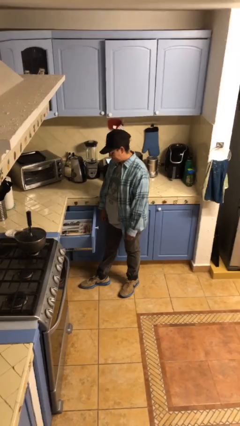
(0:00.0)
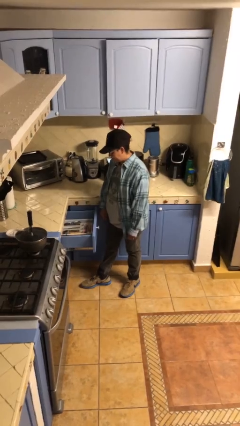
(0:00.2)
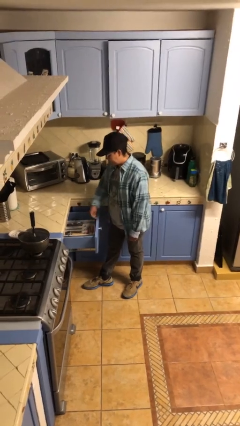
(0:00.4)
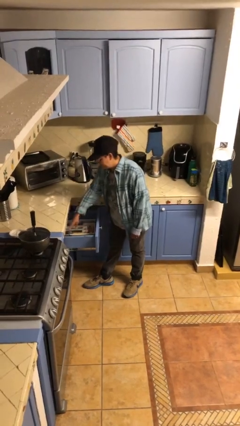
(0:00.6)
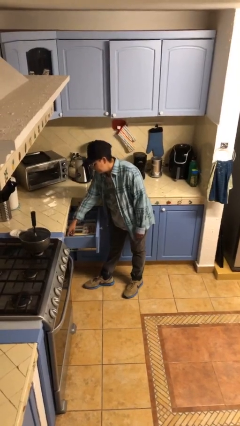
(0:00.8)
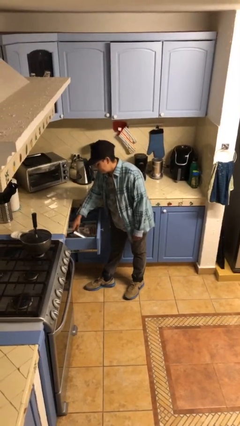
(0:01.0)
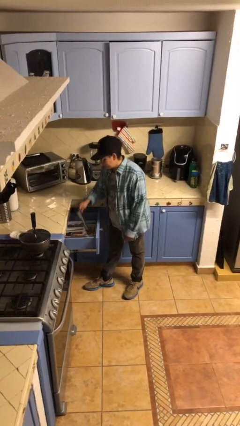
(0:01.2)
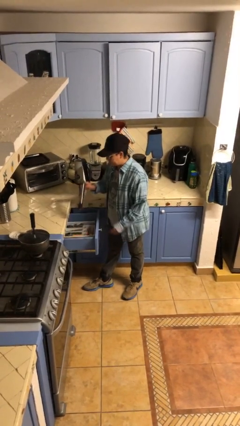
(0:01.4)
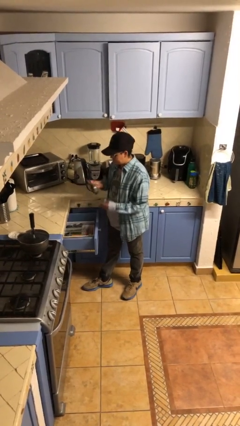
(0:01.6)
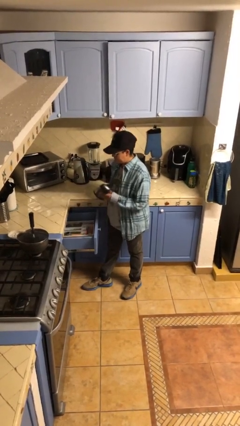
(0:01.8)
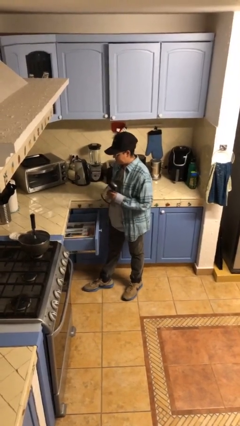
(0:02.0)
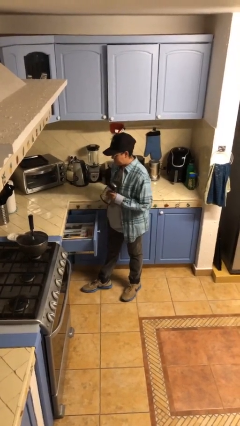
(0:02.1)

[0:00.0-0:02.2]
person takes object from kitchen drawer

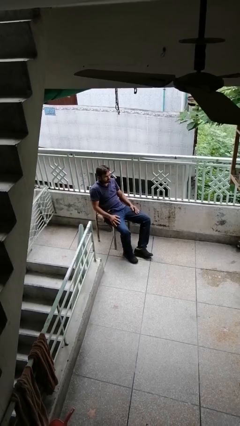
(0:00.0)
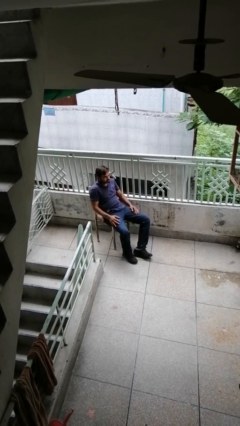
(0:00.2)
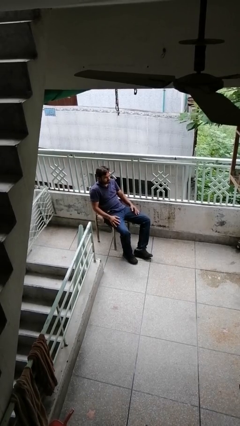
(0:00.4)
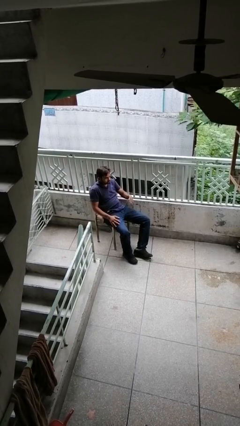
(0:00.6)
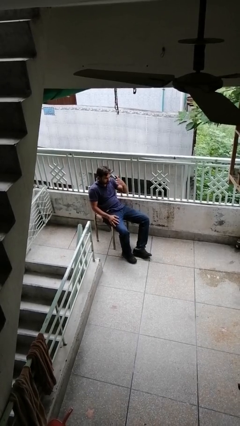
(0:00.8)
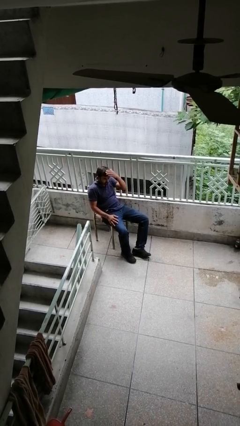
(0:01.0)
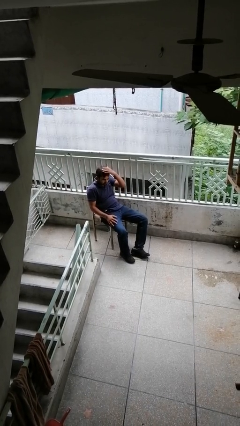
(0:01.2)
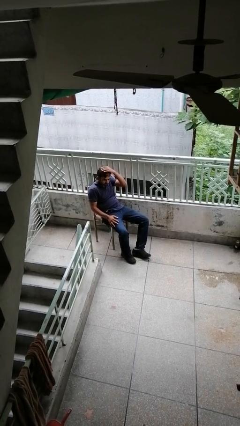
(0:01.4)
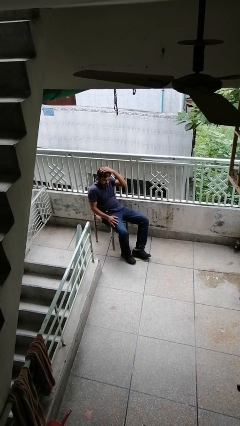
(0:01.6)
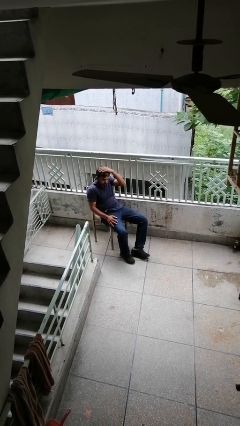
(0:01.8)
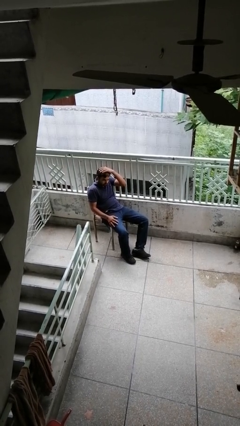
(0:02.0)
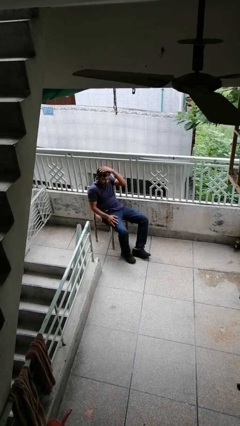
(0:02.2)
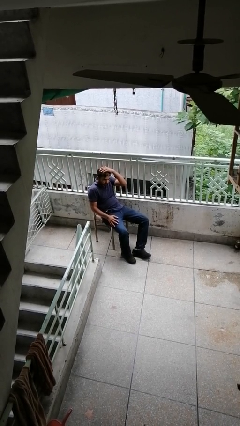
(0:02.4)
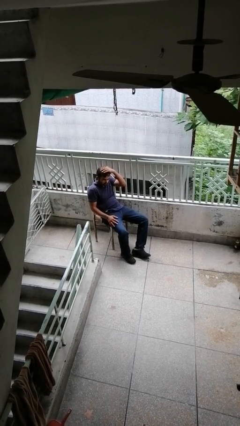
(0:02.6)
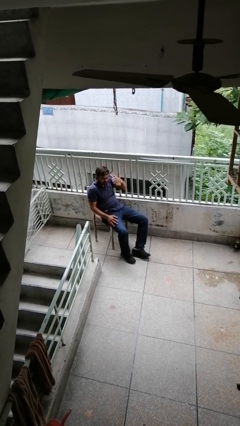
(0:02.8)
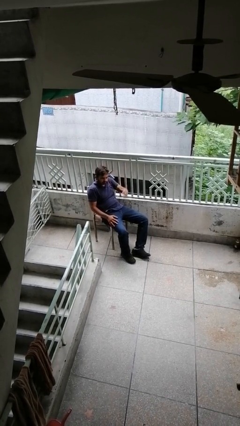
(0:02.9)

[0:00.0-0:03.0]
person pats head

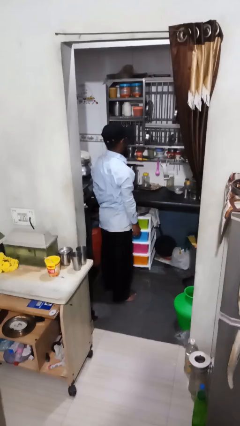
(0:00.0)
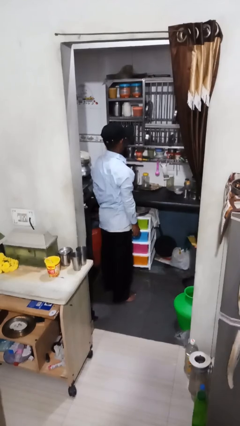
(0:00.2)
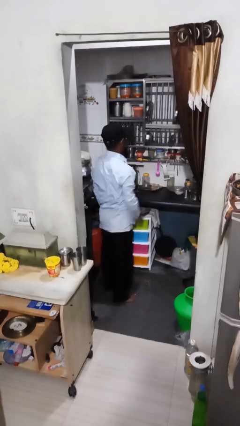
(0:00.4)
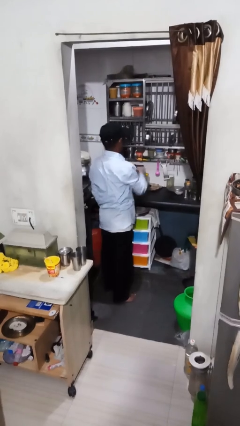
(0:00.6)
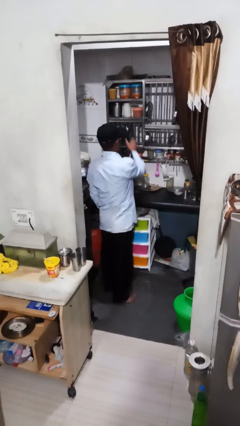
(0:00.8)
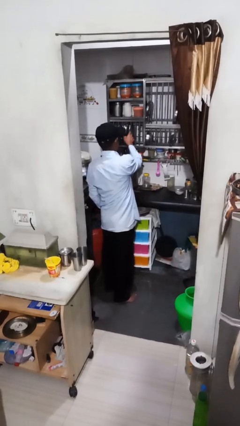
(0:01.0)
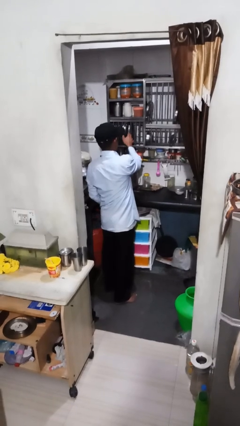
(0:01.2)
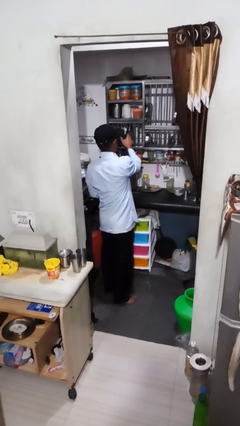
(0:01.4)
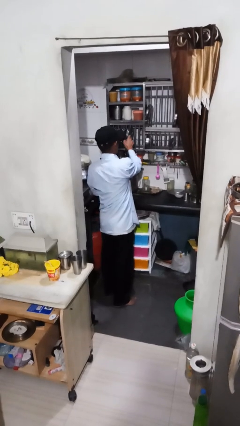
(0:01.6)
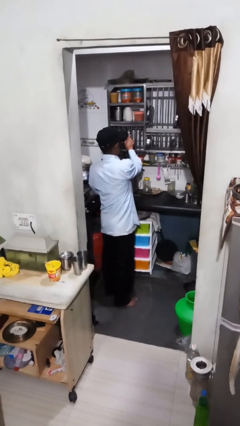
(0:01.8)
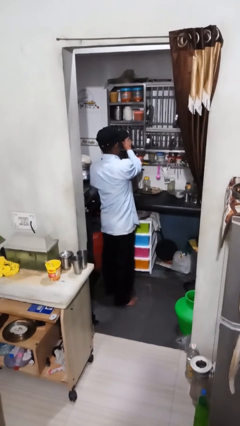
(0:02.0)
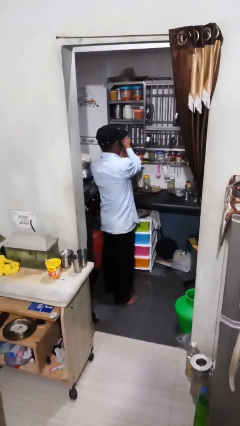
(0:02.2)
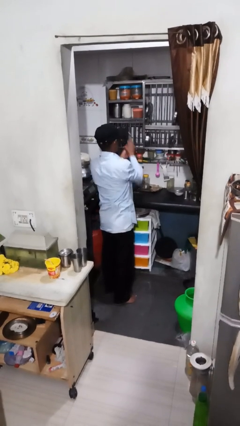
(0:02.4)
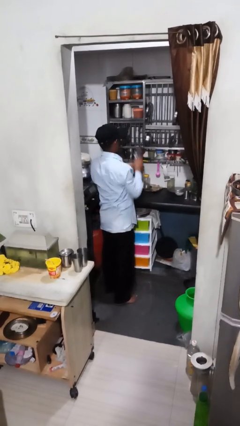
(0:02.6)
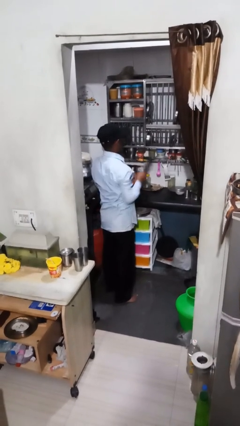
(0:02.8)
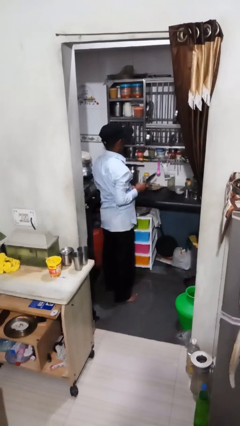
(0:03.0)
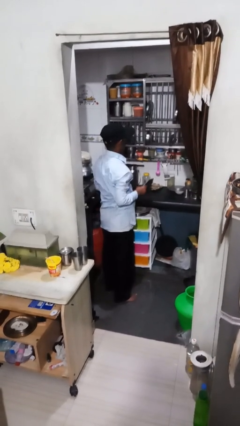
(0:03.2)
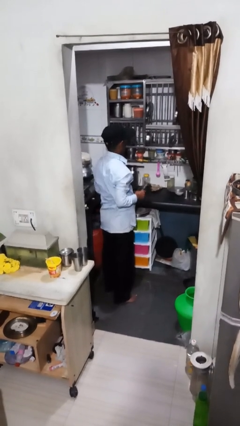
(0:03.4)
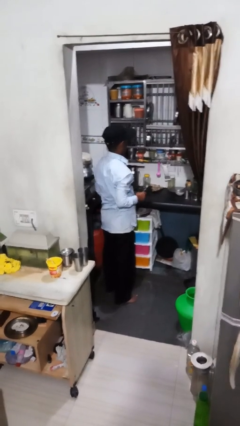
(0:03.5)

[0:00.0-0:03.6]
person takes object from cabinet

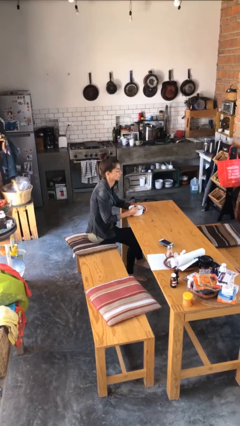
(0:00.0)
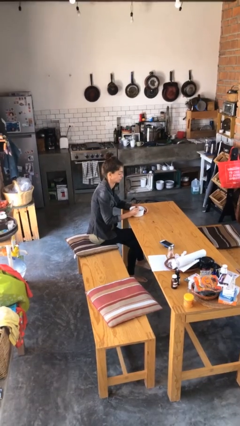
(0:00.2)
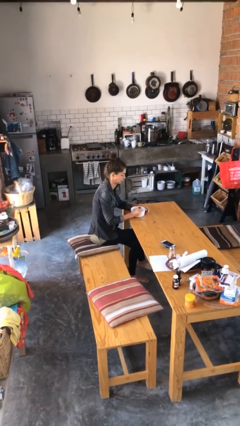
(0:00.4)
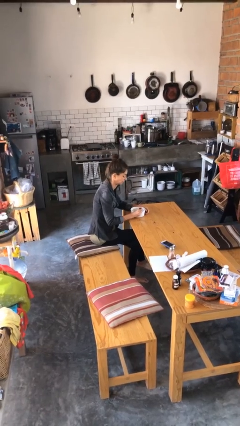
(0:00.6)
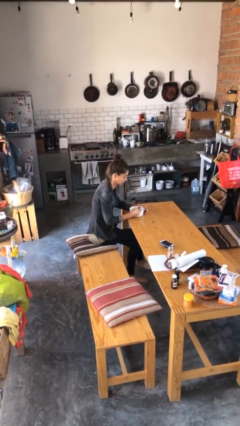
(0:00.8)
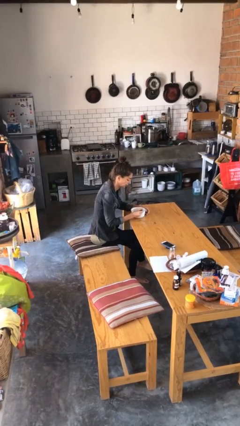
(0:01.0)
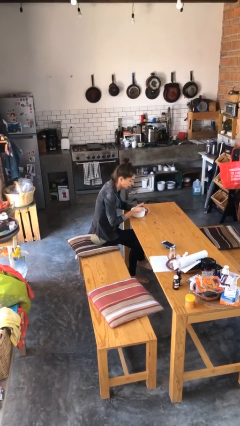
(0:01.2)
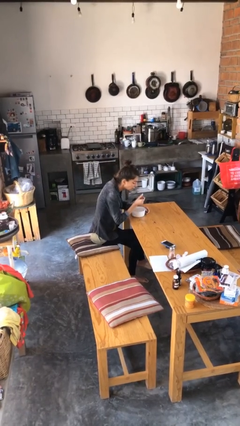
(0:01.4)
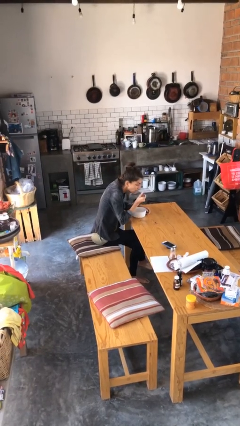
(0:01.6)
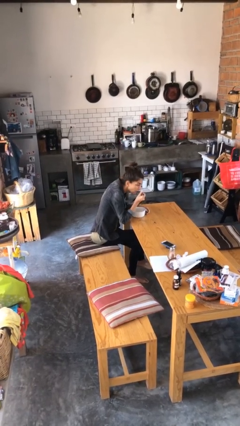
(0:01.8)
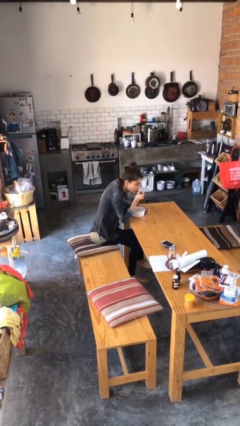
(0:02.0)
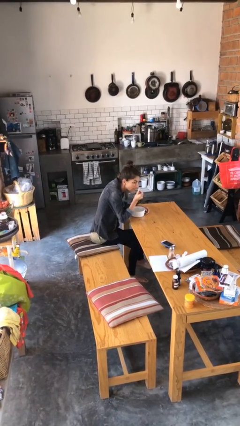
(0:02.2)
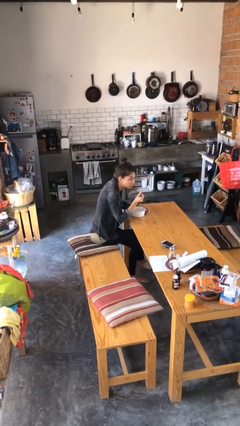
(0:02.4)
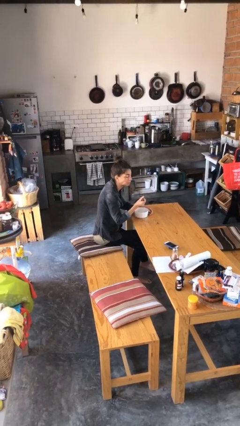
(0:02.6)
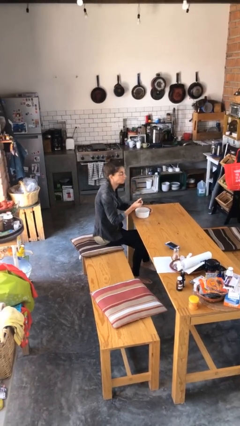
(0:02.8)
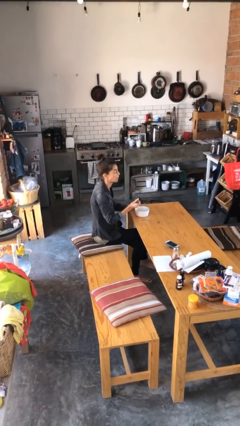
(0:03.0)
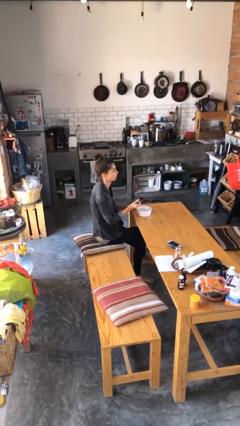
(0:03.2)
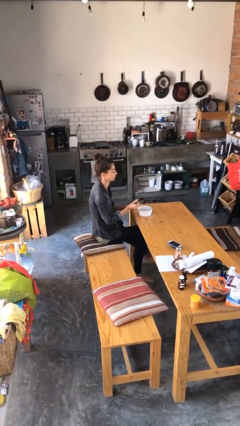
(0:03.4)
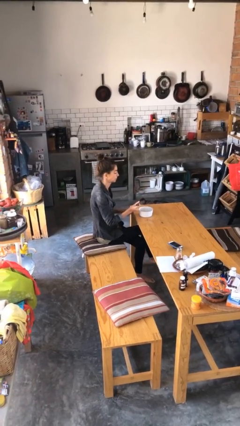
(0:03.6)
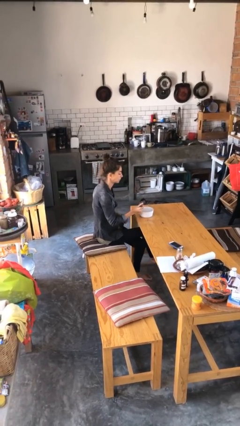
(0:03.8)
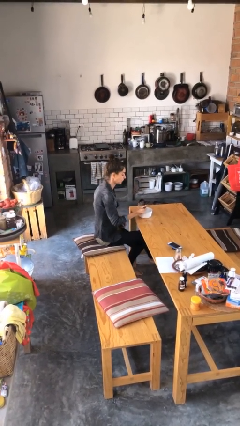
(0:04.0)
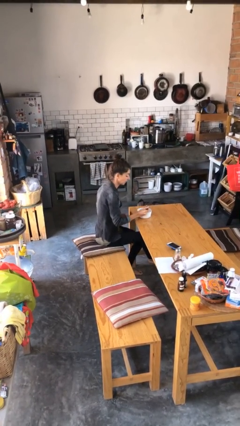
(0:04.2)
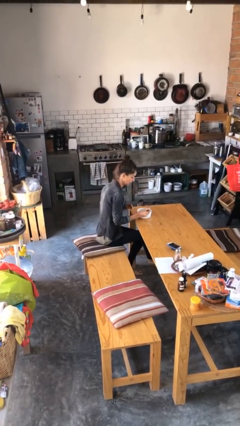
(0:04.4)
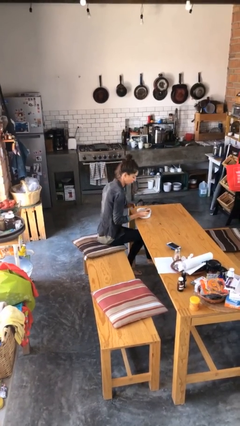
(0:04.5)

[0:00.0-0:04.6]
person eats with utensil

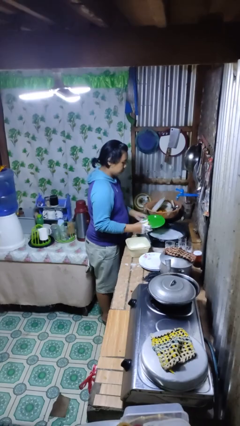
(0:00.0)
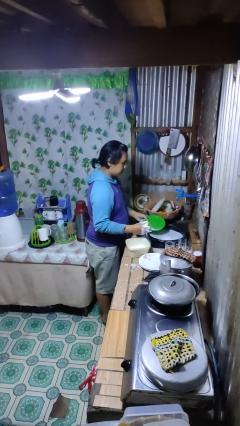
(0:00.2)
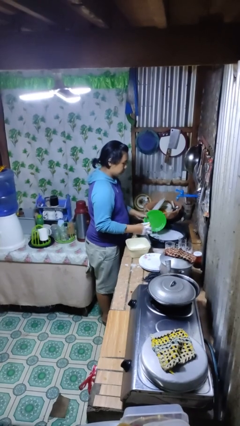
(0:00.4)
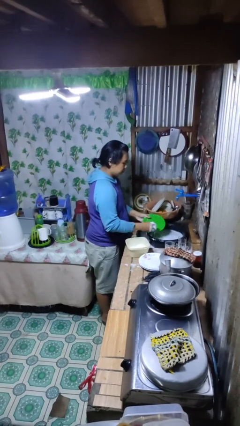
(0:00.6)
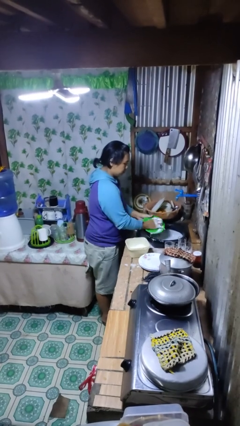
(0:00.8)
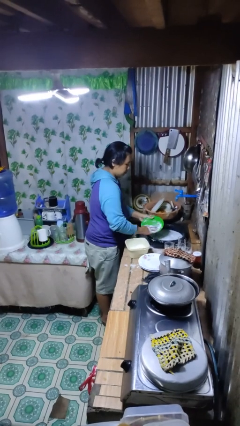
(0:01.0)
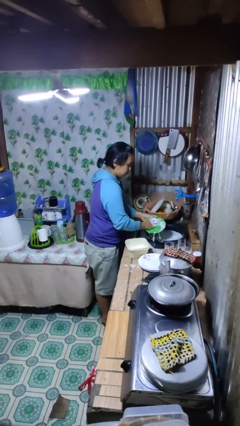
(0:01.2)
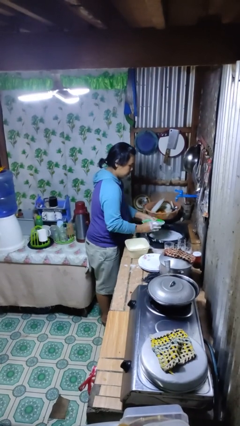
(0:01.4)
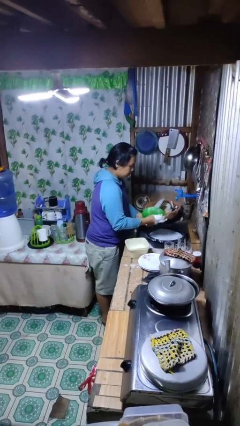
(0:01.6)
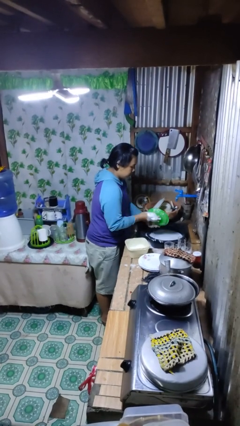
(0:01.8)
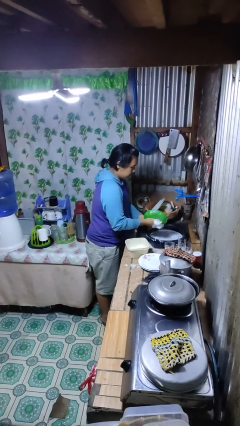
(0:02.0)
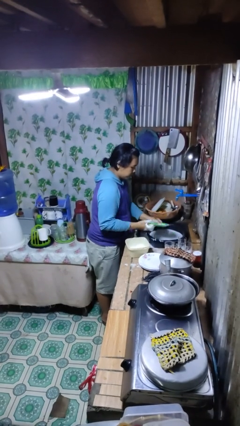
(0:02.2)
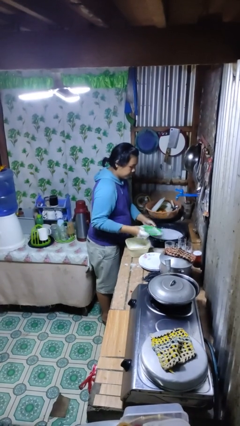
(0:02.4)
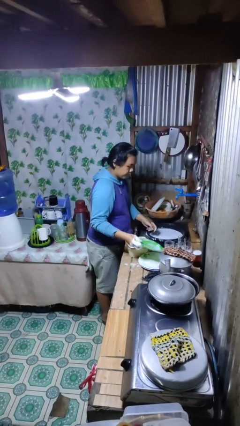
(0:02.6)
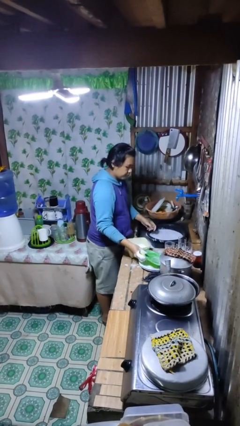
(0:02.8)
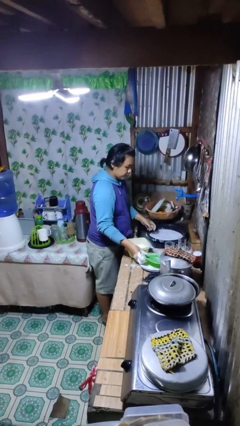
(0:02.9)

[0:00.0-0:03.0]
person washes dish

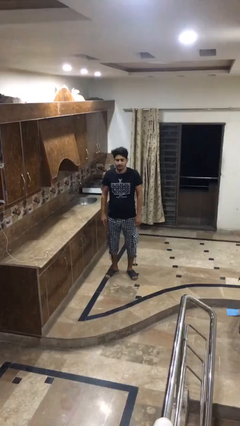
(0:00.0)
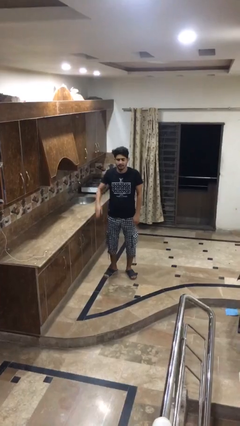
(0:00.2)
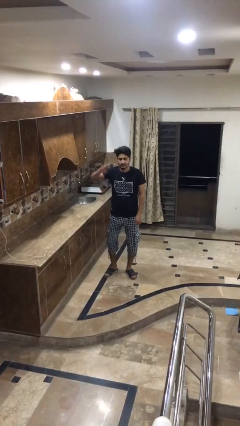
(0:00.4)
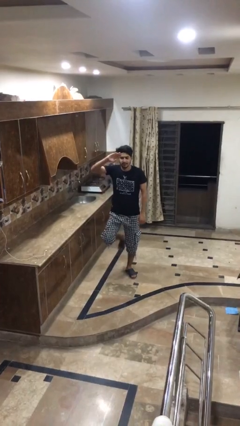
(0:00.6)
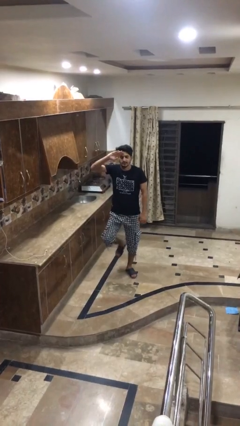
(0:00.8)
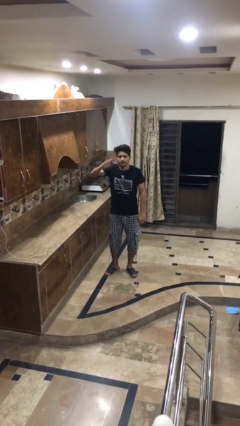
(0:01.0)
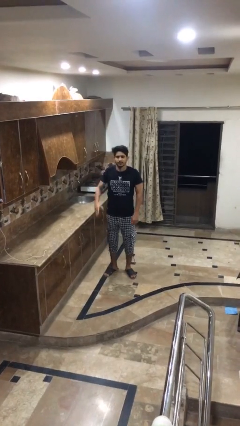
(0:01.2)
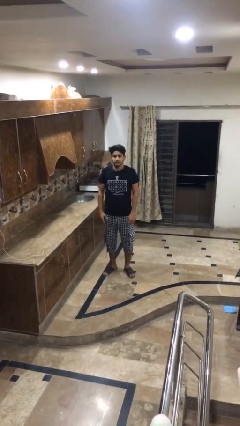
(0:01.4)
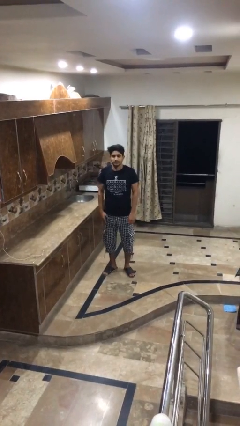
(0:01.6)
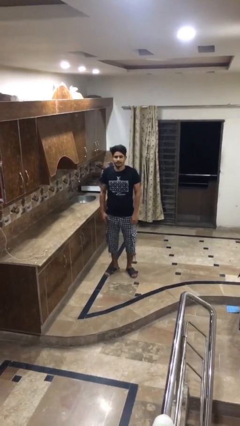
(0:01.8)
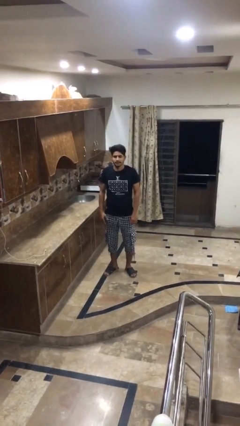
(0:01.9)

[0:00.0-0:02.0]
person salutes
